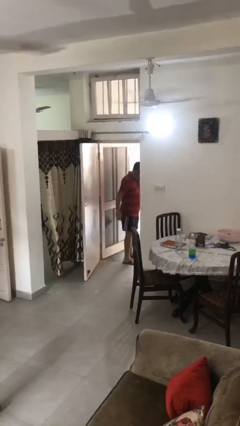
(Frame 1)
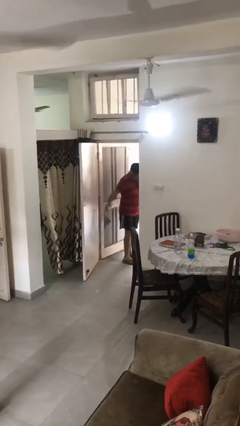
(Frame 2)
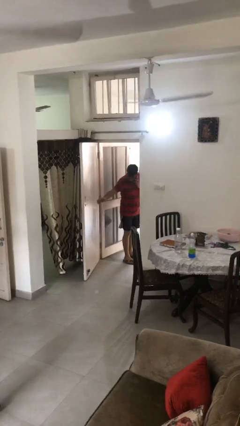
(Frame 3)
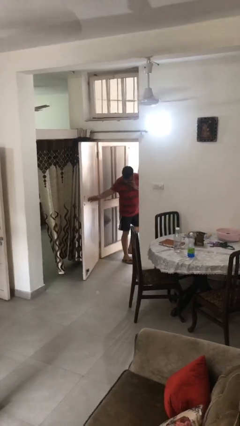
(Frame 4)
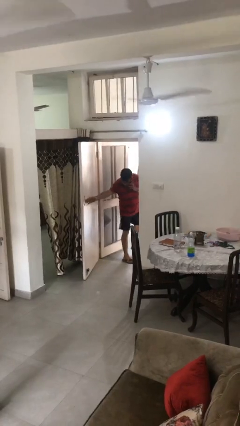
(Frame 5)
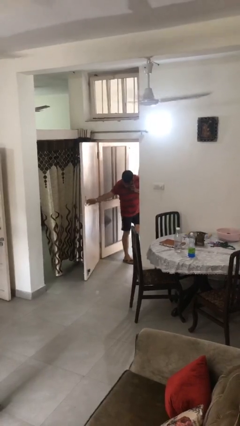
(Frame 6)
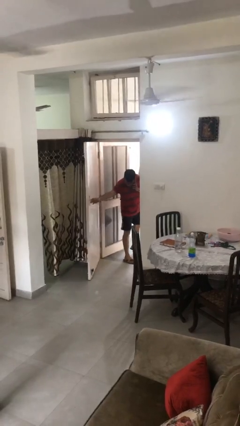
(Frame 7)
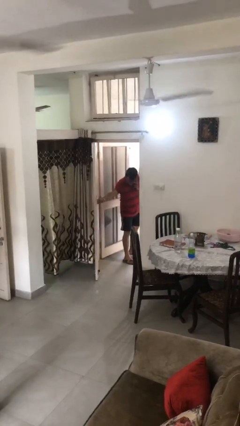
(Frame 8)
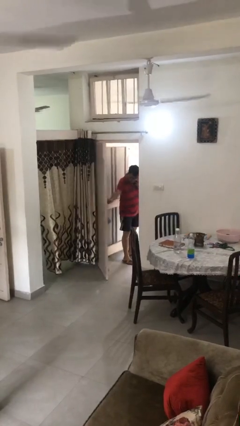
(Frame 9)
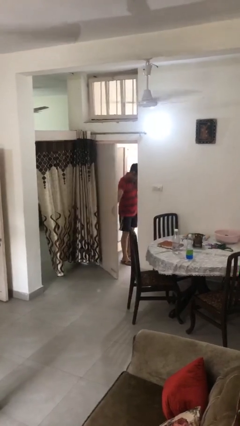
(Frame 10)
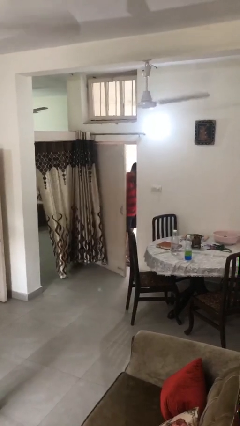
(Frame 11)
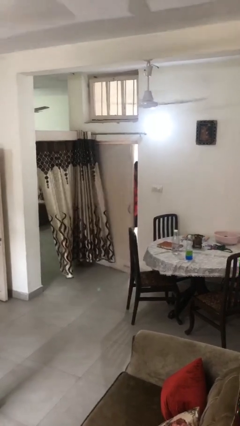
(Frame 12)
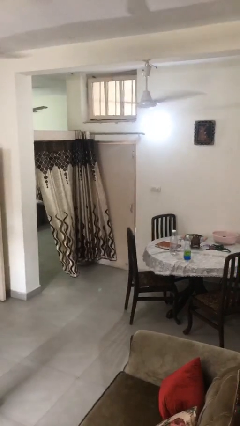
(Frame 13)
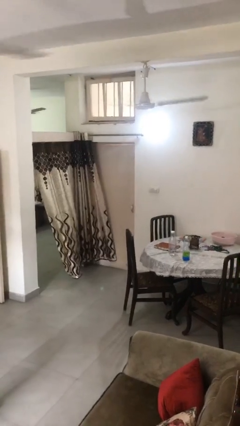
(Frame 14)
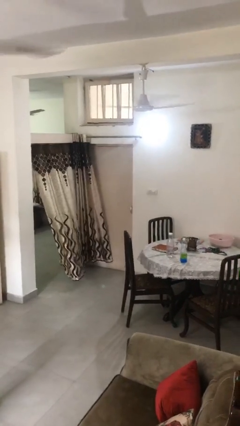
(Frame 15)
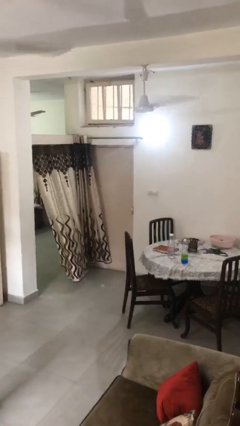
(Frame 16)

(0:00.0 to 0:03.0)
person closes facility door

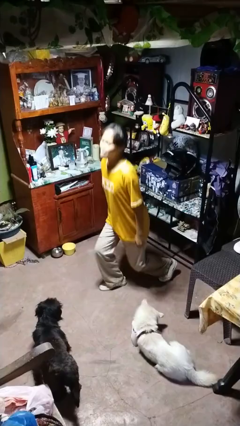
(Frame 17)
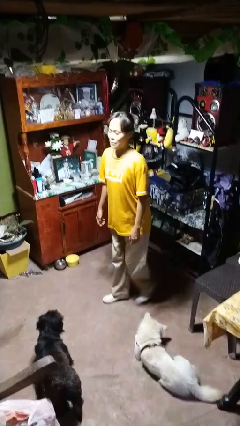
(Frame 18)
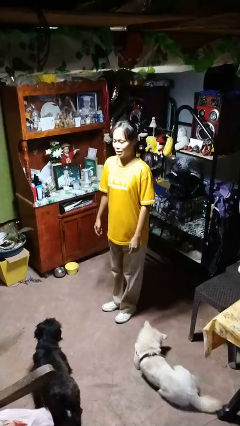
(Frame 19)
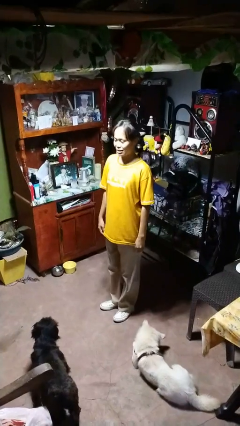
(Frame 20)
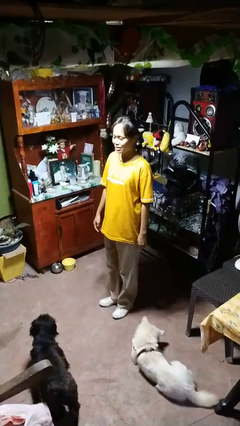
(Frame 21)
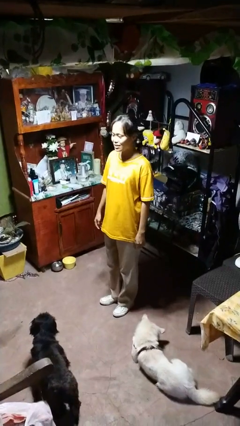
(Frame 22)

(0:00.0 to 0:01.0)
person stands up from floor

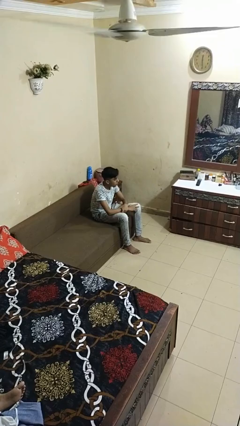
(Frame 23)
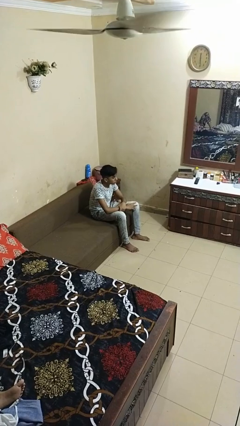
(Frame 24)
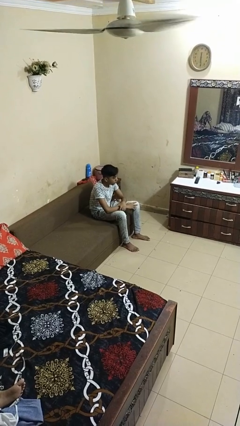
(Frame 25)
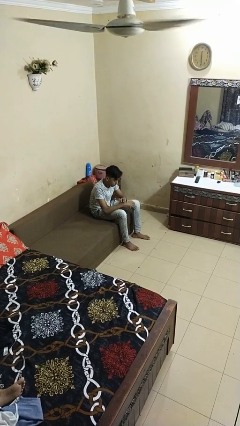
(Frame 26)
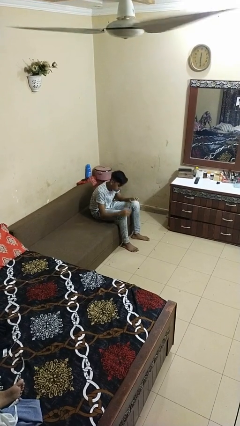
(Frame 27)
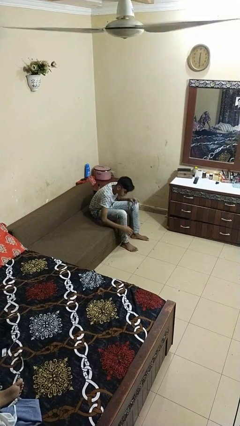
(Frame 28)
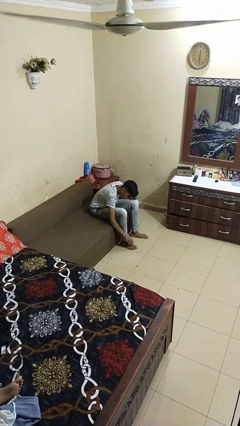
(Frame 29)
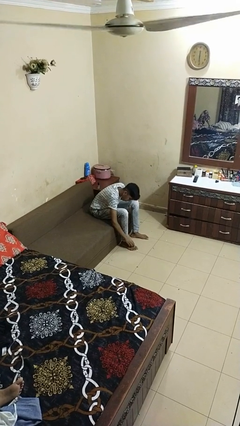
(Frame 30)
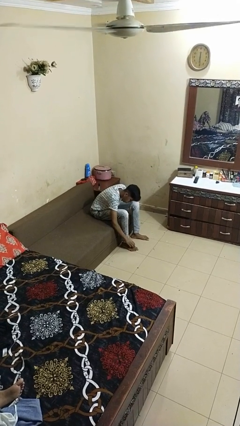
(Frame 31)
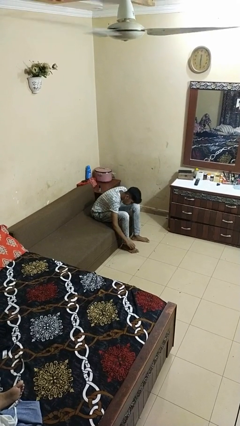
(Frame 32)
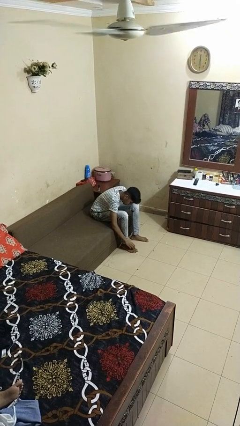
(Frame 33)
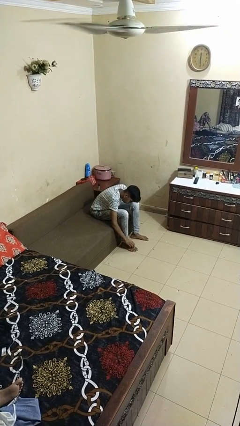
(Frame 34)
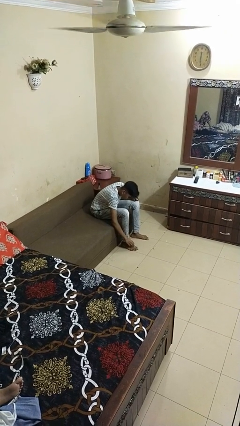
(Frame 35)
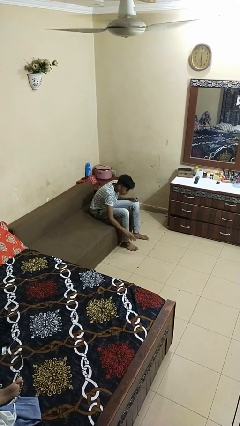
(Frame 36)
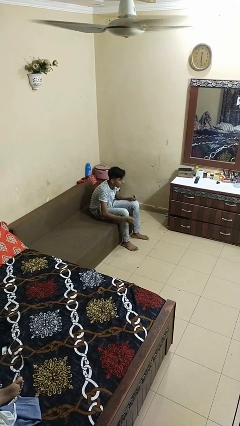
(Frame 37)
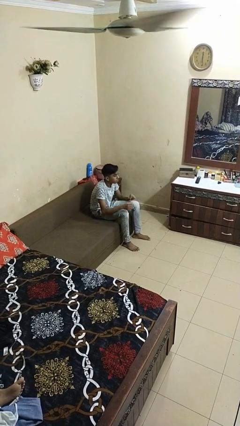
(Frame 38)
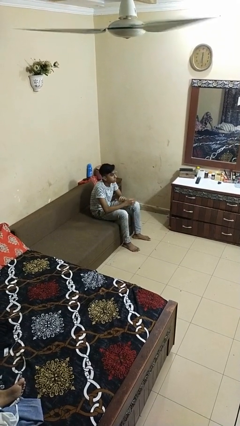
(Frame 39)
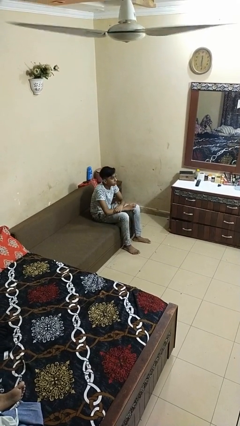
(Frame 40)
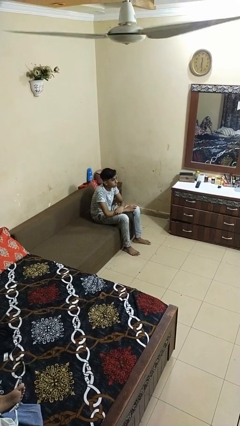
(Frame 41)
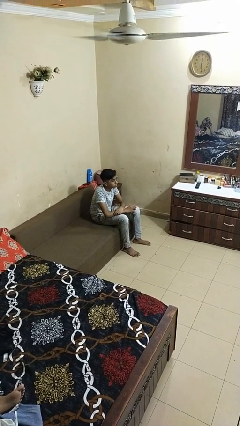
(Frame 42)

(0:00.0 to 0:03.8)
person rubs foot

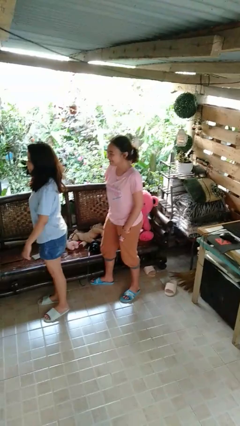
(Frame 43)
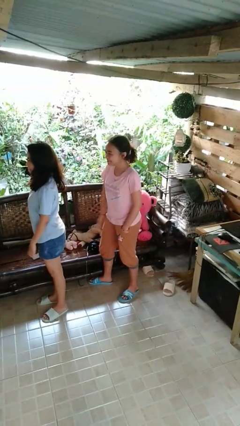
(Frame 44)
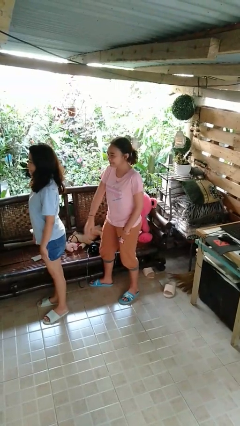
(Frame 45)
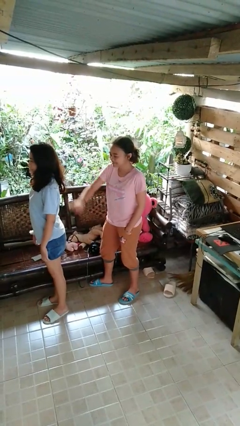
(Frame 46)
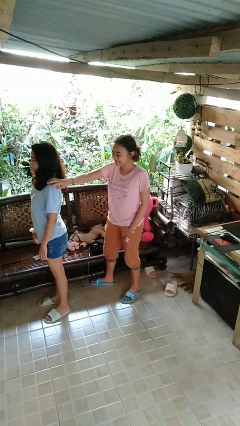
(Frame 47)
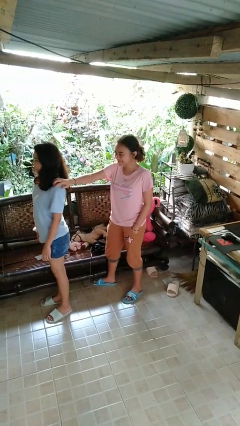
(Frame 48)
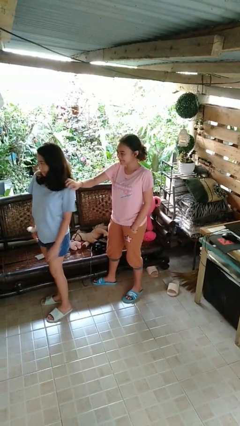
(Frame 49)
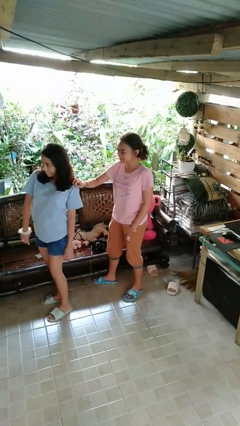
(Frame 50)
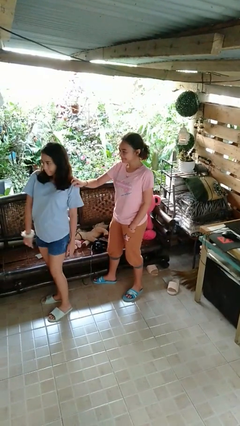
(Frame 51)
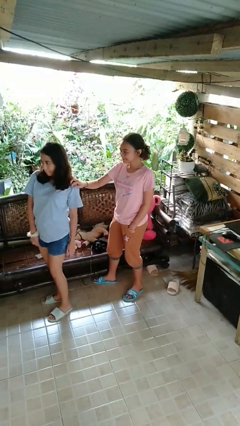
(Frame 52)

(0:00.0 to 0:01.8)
person grabs person by shoulder

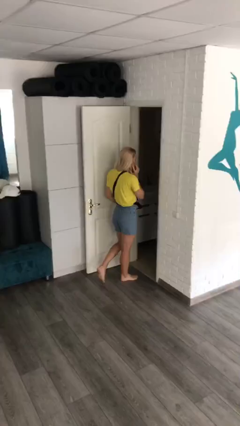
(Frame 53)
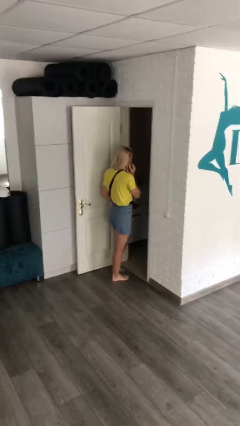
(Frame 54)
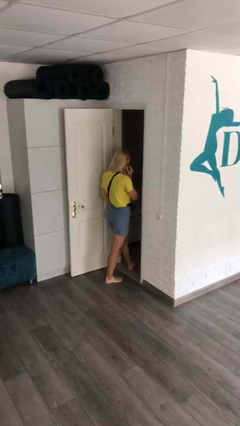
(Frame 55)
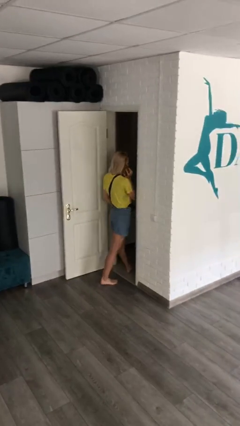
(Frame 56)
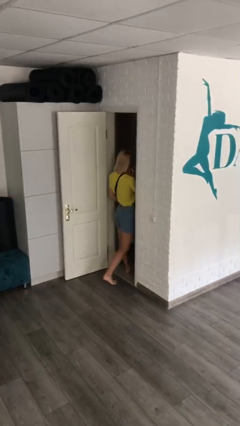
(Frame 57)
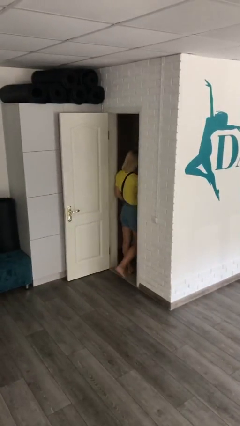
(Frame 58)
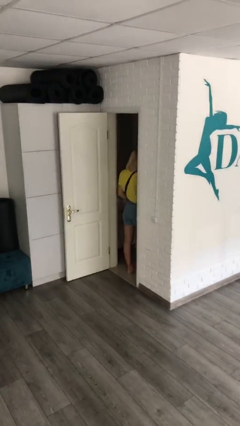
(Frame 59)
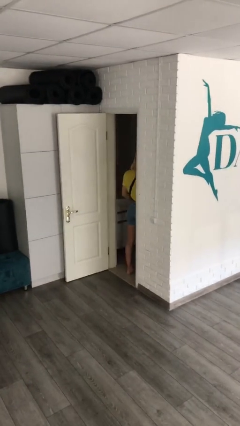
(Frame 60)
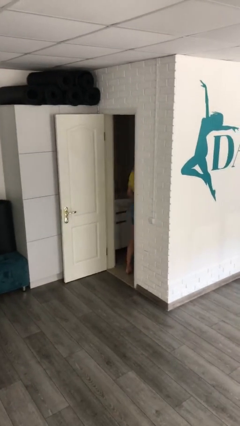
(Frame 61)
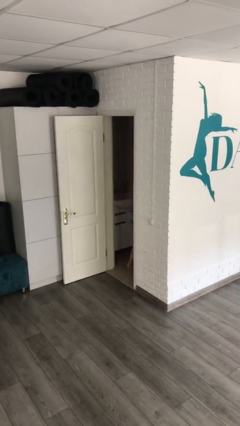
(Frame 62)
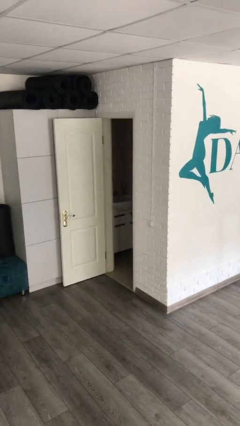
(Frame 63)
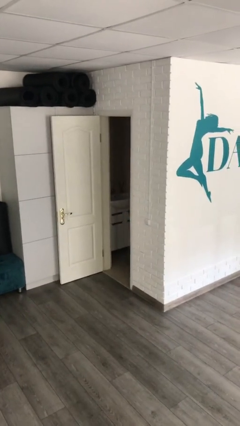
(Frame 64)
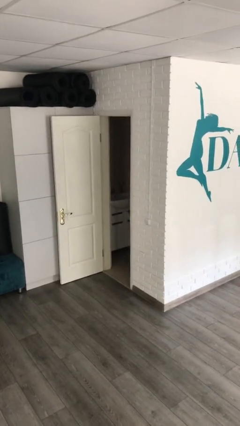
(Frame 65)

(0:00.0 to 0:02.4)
person exits scene through structure

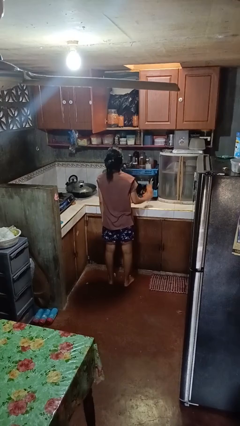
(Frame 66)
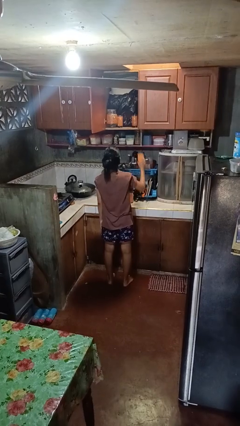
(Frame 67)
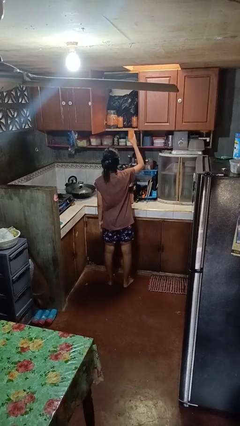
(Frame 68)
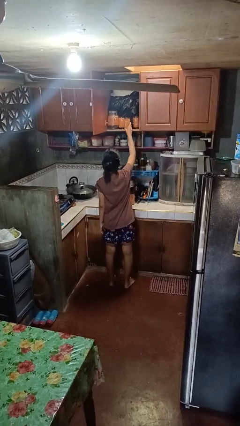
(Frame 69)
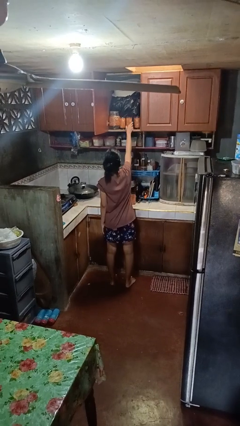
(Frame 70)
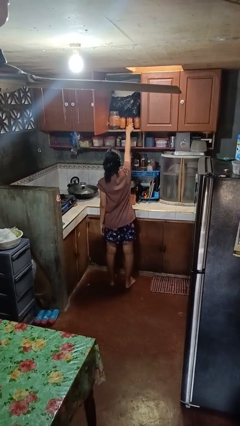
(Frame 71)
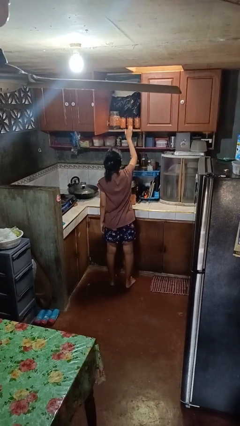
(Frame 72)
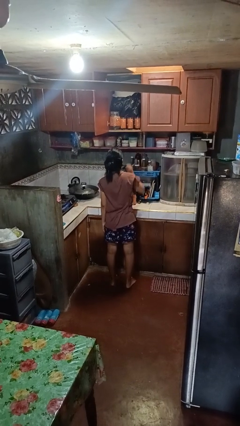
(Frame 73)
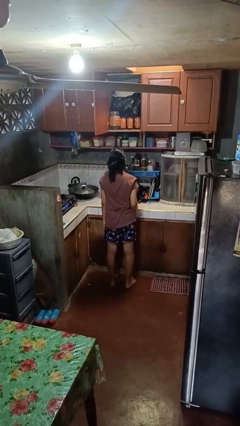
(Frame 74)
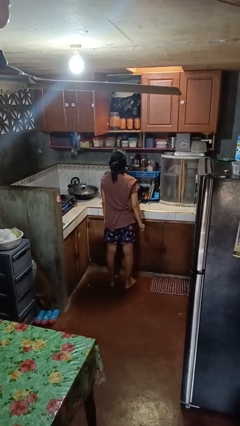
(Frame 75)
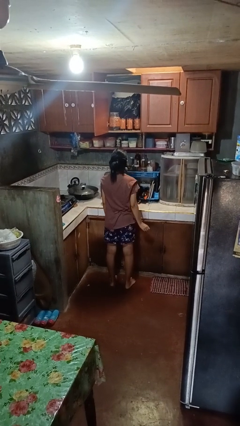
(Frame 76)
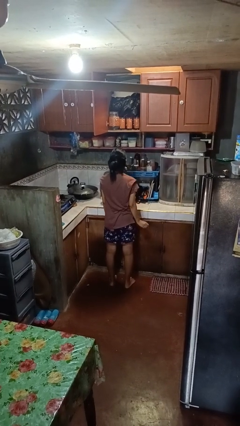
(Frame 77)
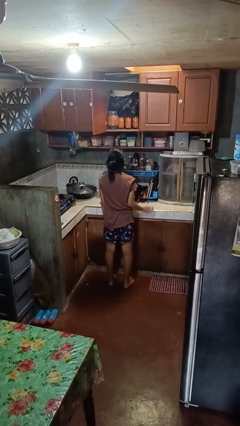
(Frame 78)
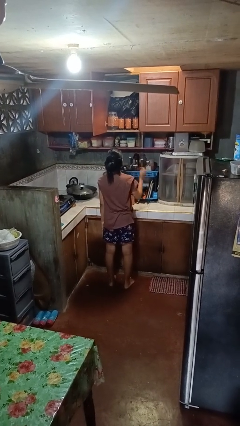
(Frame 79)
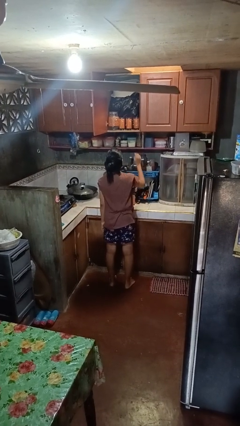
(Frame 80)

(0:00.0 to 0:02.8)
person puts object in cabinet

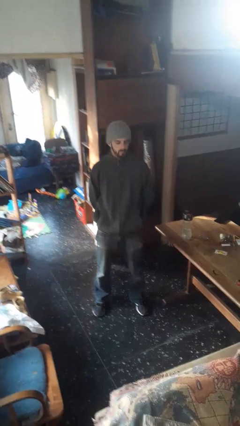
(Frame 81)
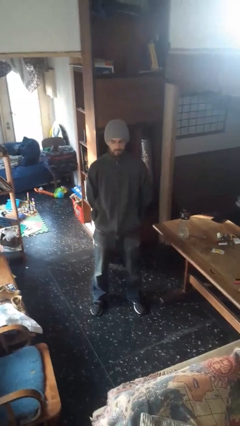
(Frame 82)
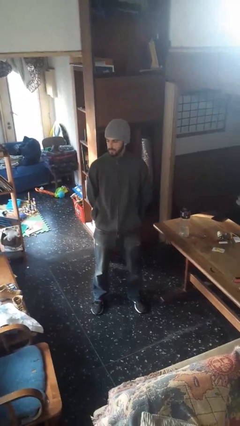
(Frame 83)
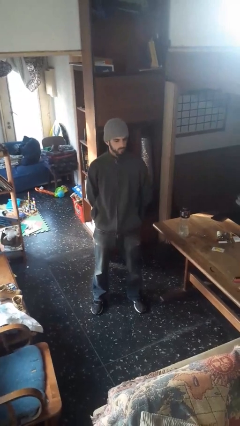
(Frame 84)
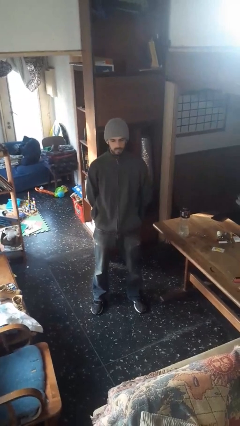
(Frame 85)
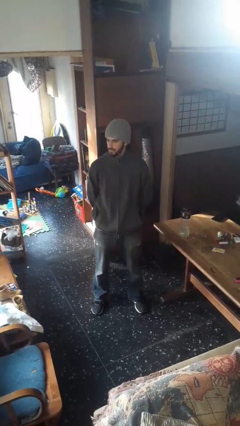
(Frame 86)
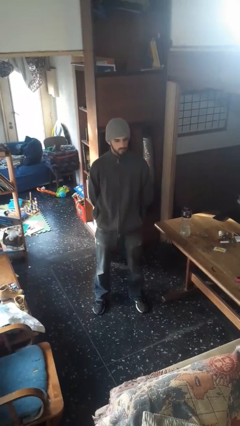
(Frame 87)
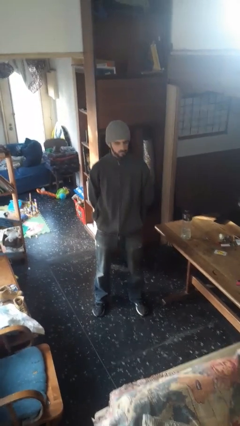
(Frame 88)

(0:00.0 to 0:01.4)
person shakes head

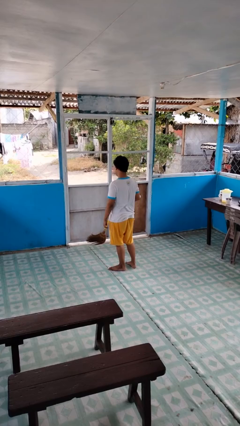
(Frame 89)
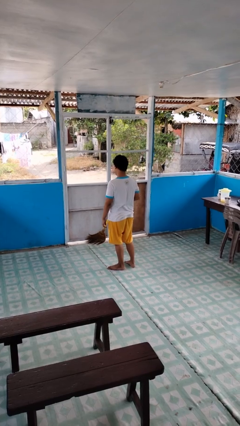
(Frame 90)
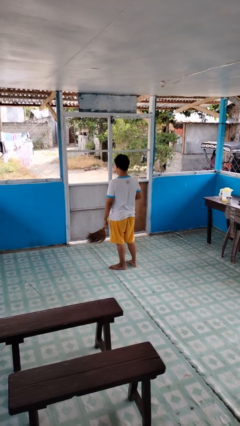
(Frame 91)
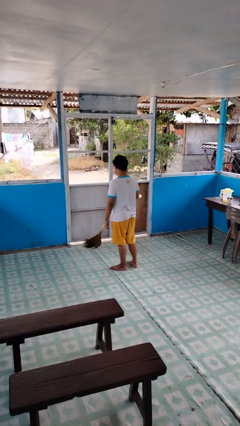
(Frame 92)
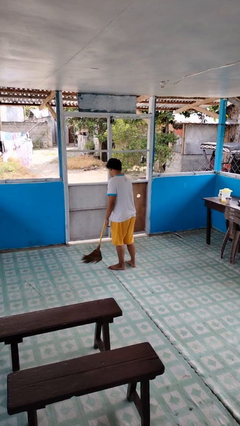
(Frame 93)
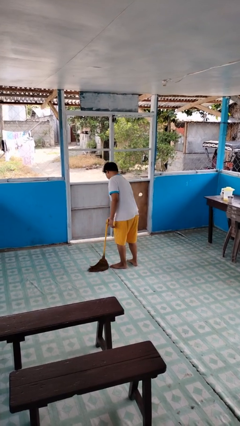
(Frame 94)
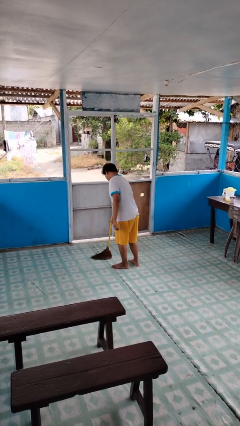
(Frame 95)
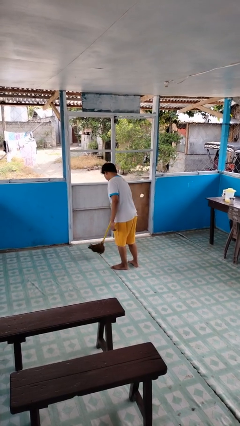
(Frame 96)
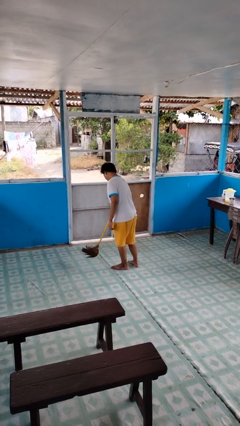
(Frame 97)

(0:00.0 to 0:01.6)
person sweeps floor
